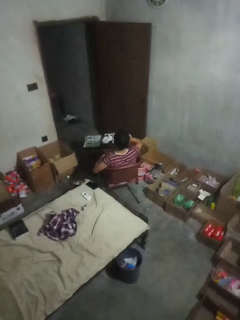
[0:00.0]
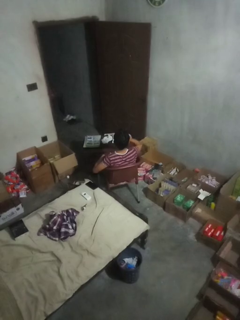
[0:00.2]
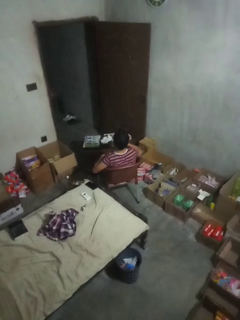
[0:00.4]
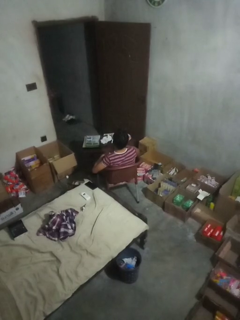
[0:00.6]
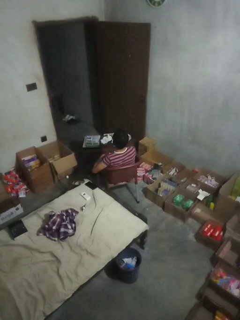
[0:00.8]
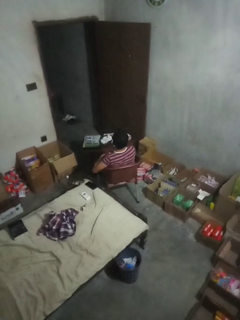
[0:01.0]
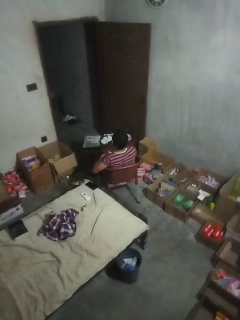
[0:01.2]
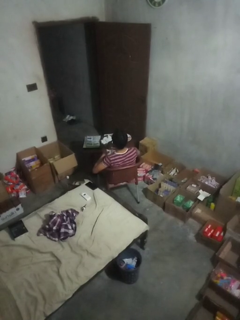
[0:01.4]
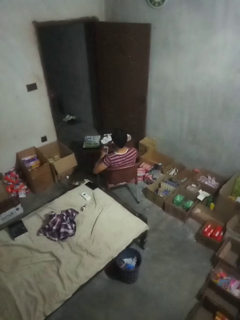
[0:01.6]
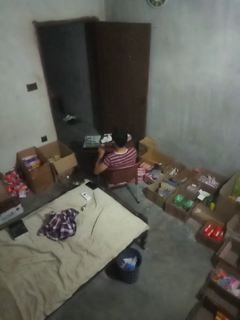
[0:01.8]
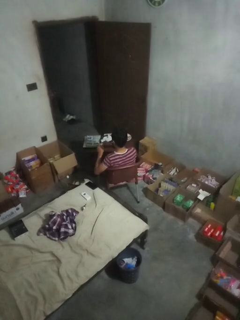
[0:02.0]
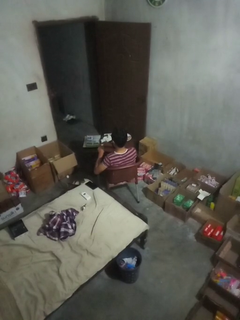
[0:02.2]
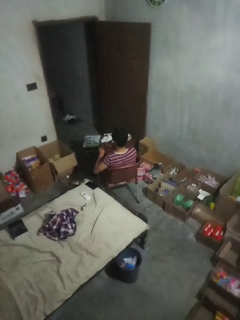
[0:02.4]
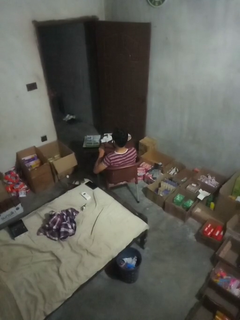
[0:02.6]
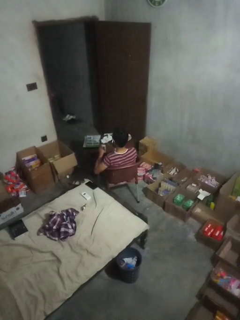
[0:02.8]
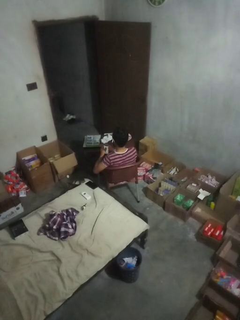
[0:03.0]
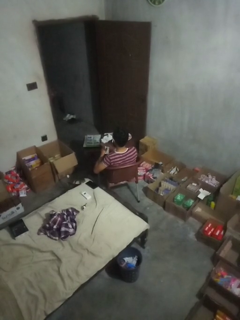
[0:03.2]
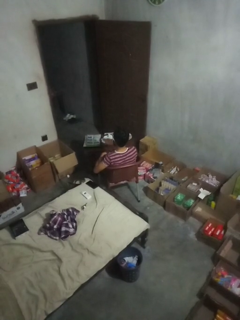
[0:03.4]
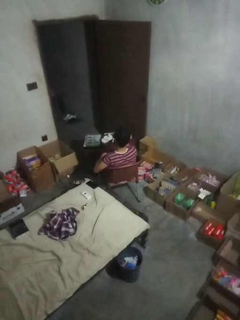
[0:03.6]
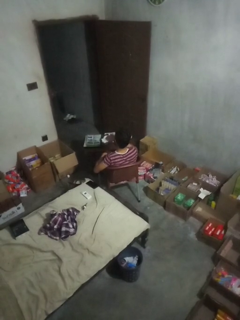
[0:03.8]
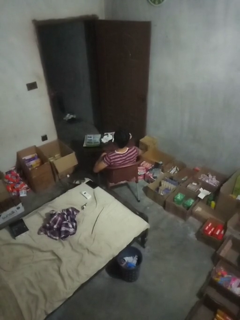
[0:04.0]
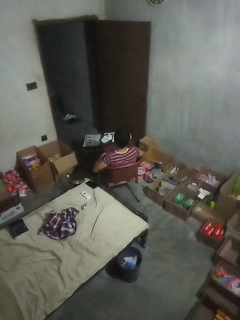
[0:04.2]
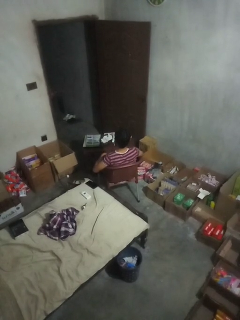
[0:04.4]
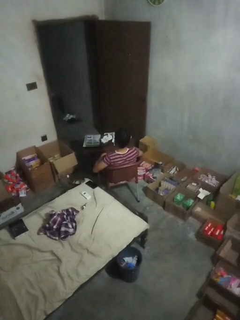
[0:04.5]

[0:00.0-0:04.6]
person takes medicine pills

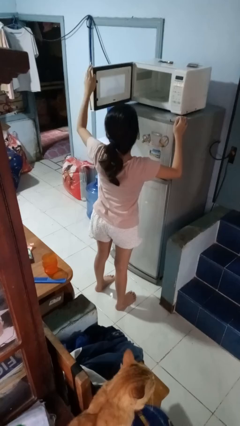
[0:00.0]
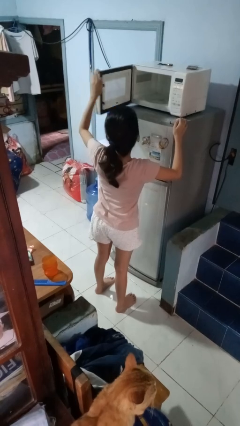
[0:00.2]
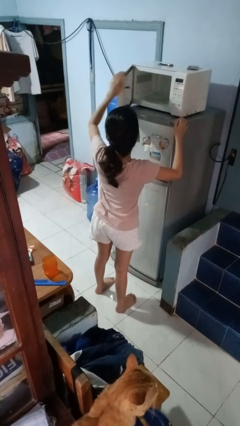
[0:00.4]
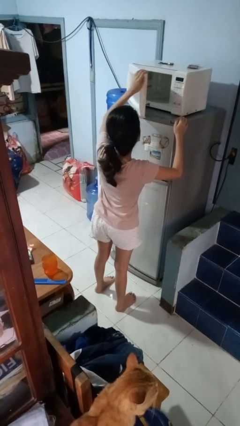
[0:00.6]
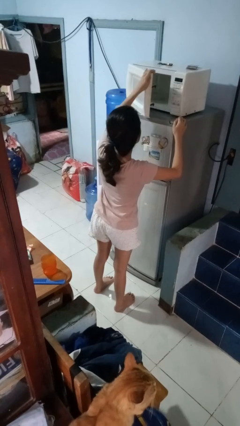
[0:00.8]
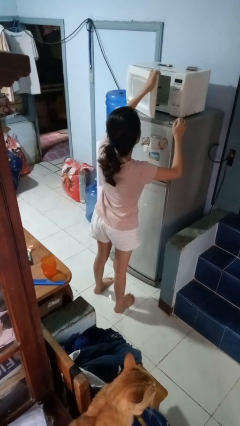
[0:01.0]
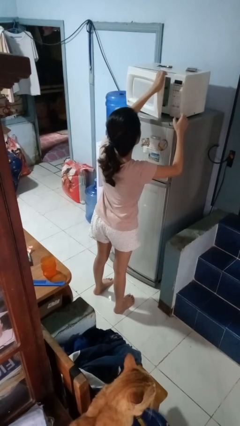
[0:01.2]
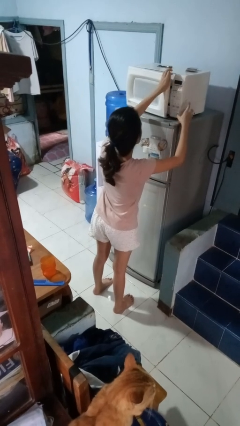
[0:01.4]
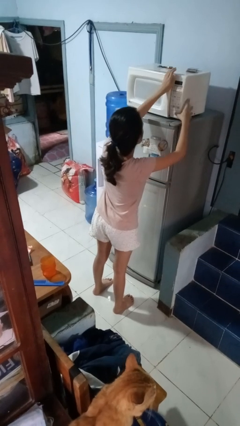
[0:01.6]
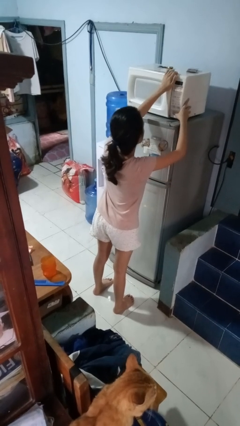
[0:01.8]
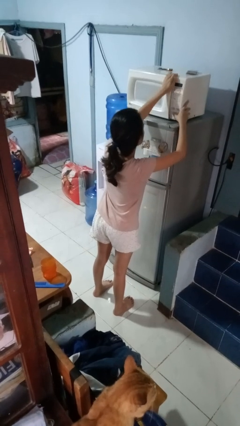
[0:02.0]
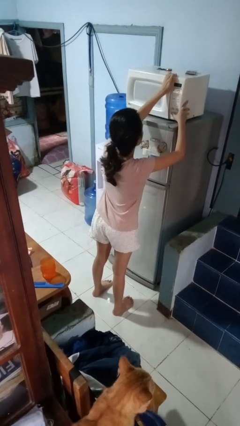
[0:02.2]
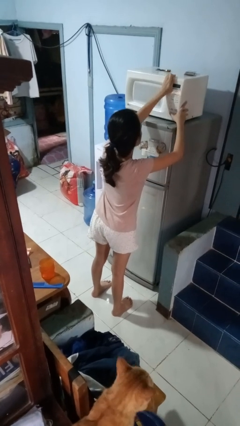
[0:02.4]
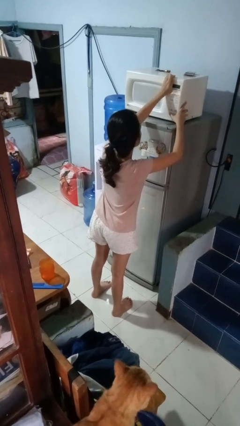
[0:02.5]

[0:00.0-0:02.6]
person closes microwave

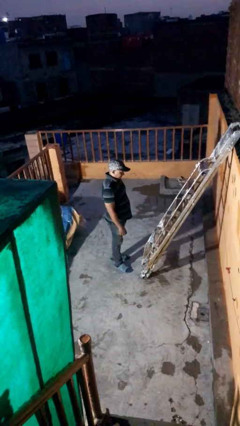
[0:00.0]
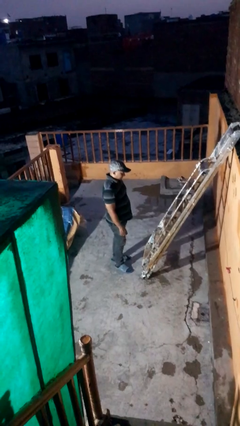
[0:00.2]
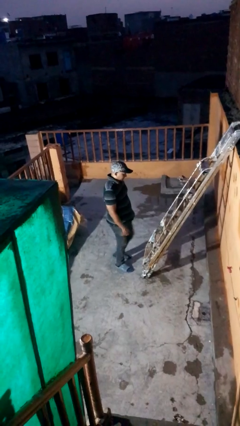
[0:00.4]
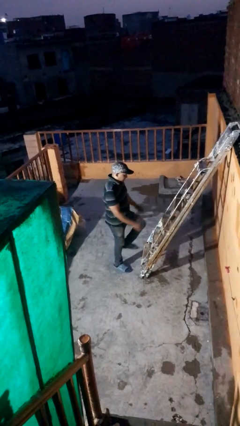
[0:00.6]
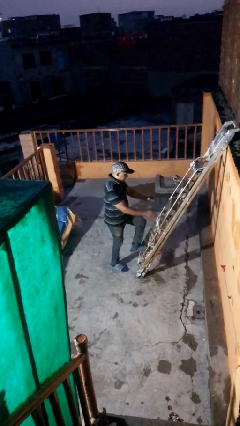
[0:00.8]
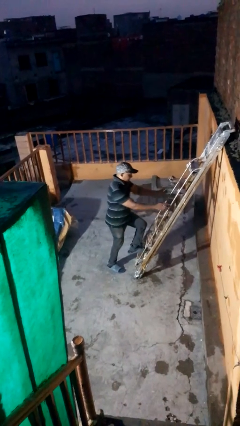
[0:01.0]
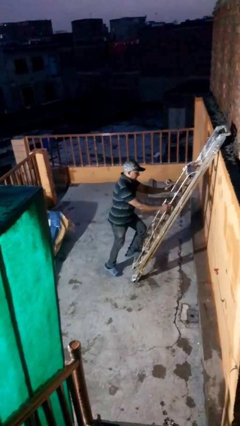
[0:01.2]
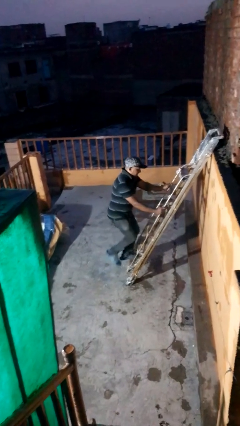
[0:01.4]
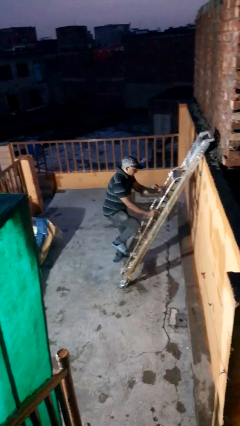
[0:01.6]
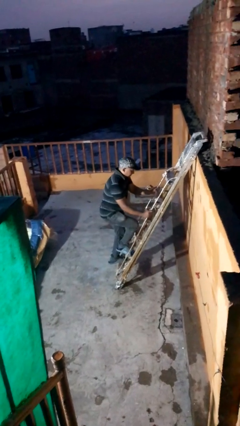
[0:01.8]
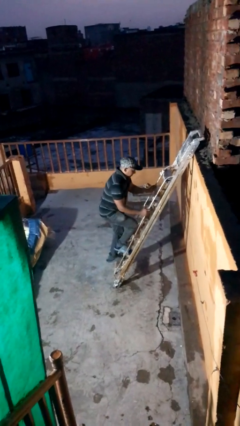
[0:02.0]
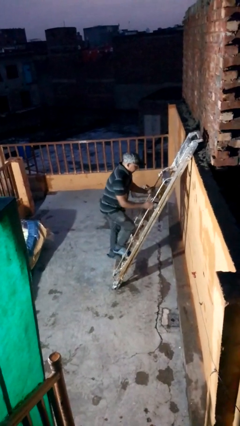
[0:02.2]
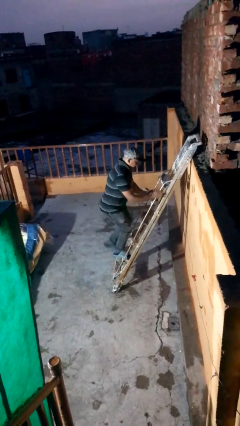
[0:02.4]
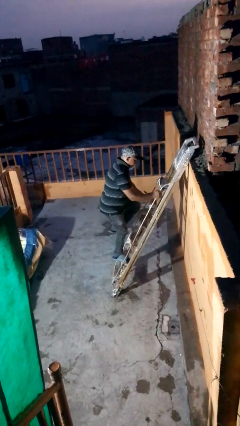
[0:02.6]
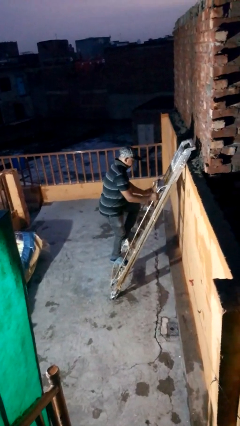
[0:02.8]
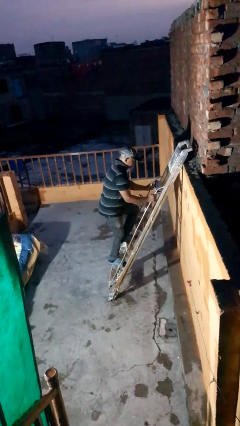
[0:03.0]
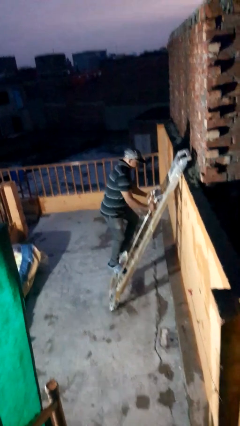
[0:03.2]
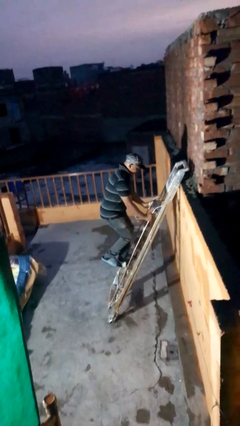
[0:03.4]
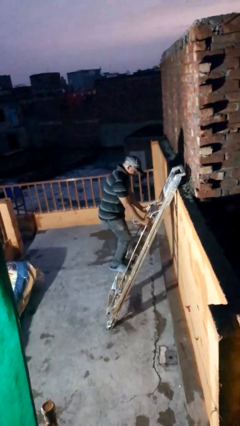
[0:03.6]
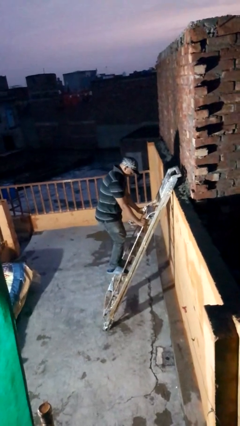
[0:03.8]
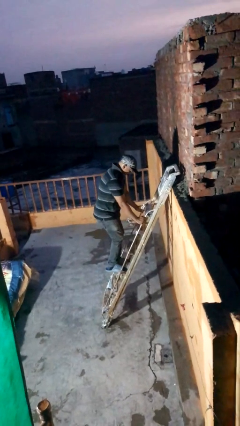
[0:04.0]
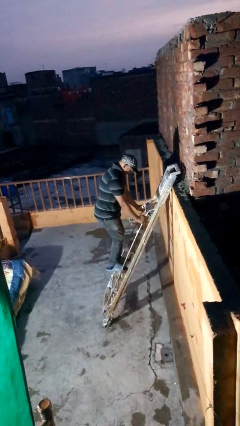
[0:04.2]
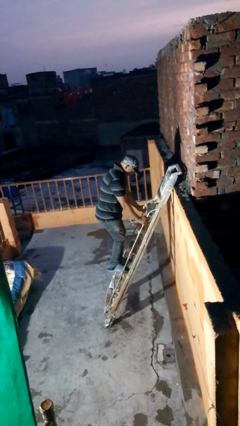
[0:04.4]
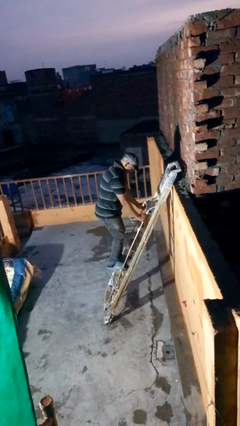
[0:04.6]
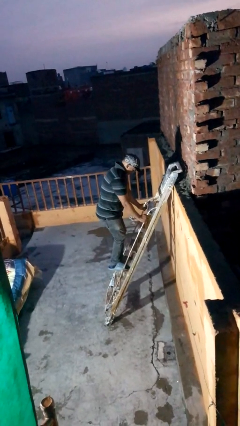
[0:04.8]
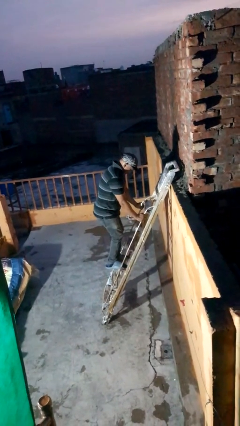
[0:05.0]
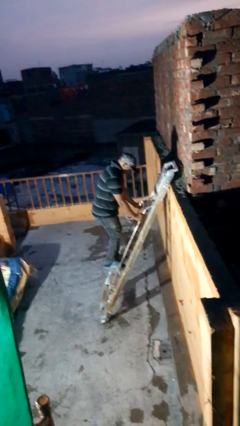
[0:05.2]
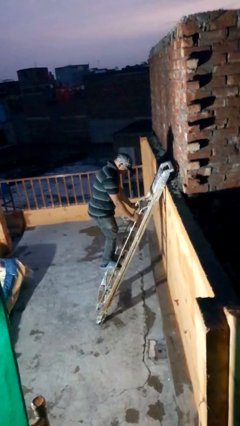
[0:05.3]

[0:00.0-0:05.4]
person climbs up ladder

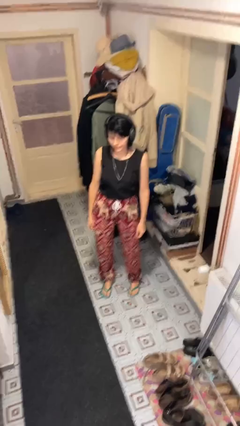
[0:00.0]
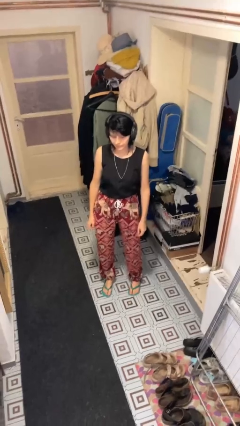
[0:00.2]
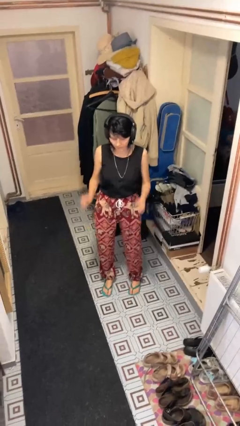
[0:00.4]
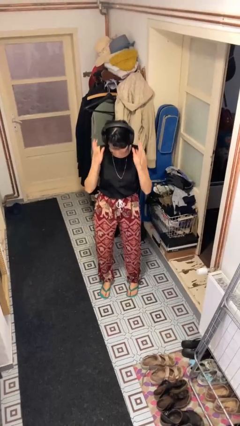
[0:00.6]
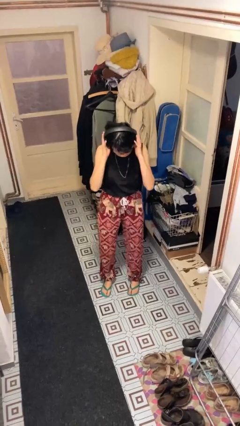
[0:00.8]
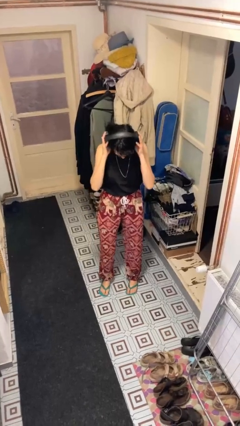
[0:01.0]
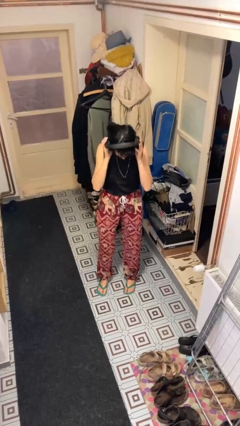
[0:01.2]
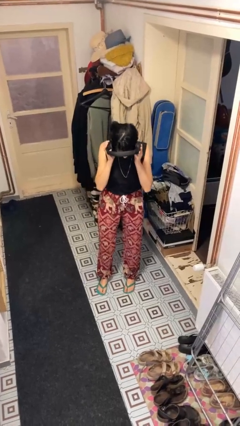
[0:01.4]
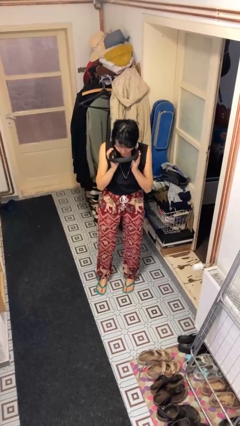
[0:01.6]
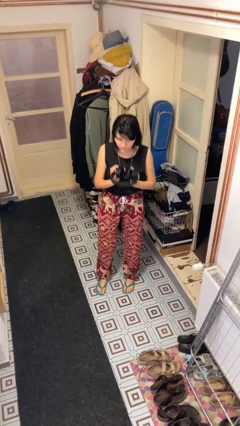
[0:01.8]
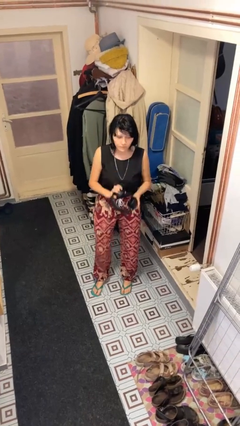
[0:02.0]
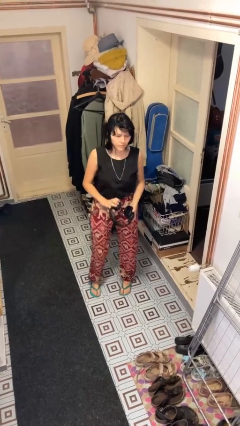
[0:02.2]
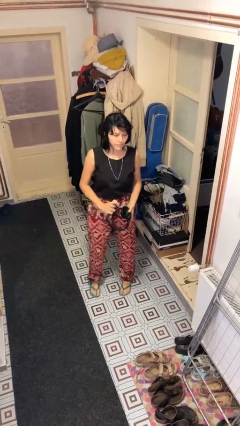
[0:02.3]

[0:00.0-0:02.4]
person takes off headphones

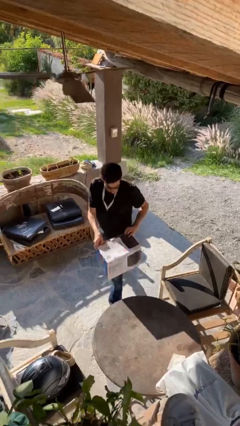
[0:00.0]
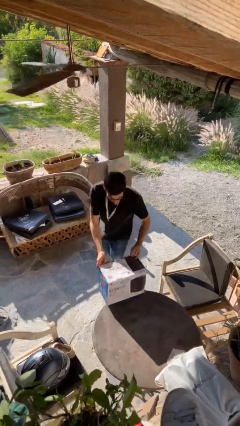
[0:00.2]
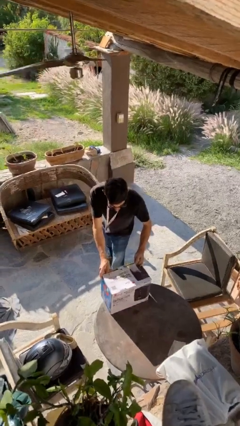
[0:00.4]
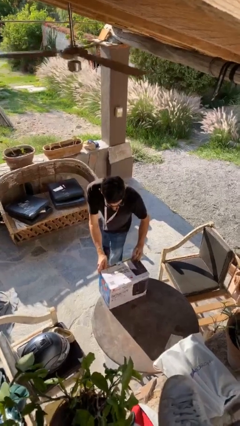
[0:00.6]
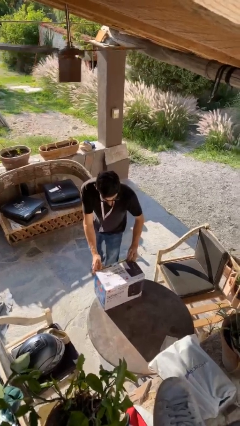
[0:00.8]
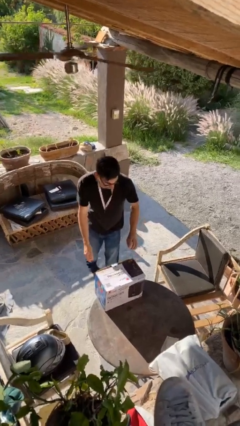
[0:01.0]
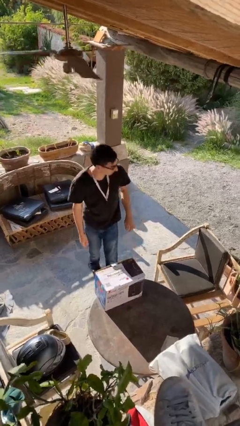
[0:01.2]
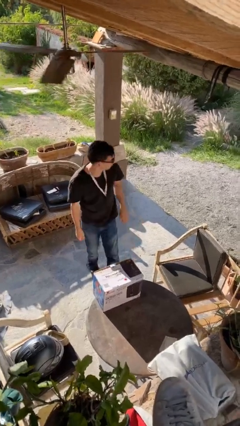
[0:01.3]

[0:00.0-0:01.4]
person puts down object on table

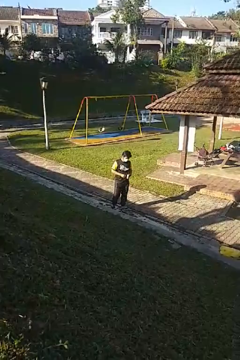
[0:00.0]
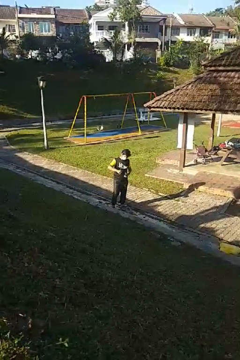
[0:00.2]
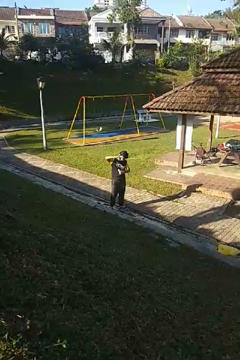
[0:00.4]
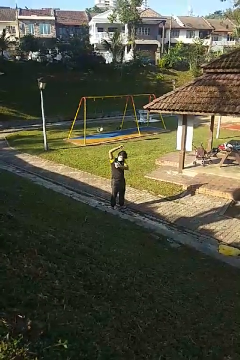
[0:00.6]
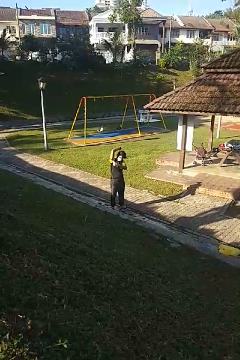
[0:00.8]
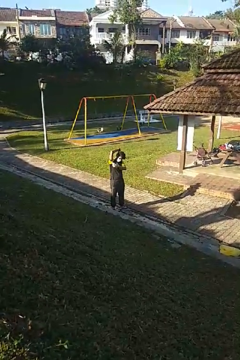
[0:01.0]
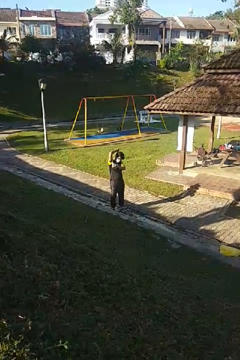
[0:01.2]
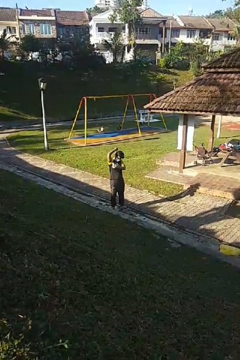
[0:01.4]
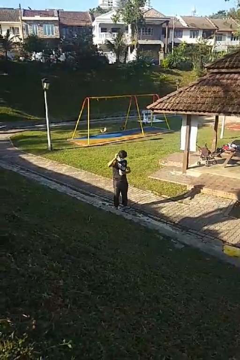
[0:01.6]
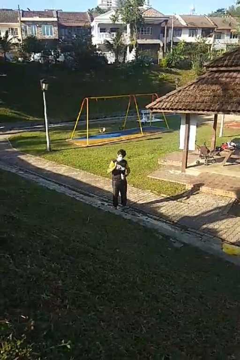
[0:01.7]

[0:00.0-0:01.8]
person applies deodorant

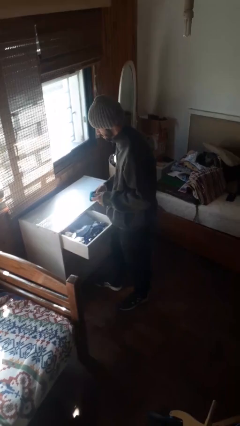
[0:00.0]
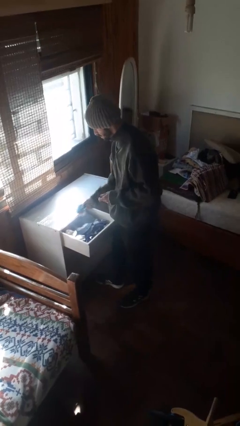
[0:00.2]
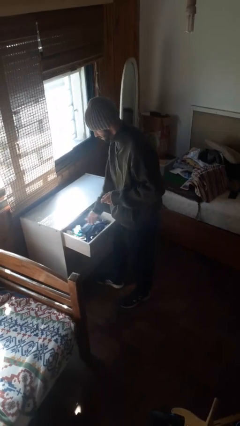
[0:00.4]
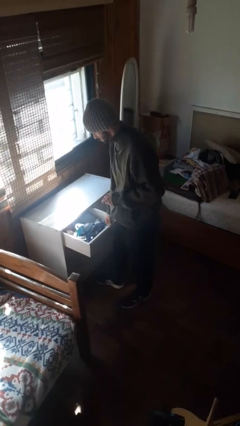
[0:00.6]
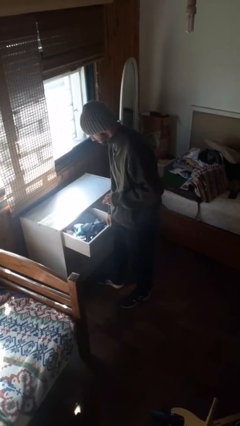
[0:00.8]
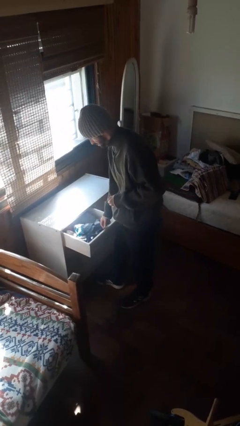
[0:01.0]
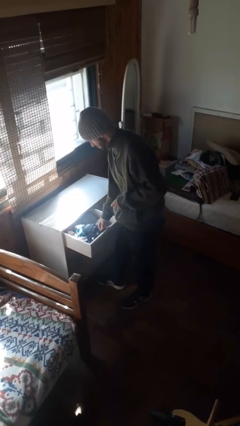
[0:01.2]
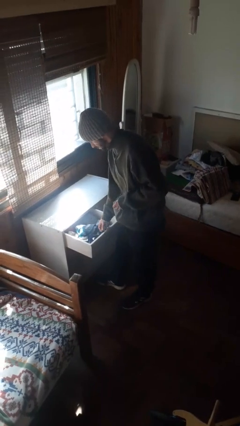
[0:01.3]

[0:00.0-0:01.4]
person puts clothes into dresser
